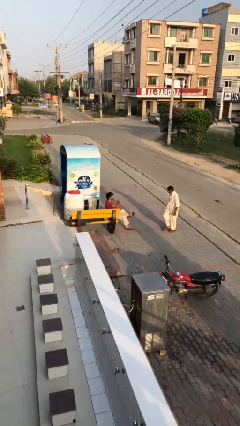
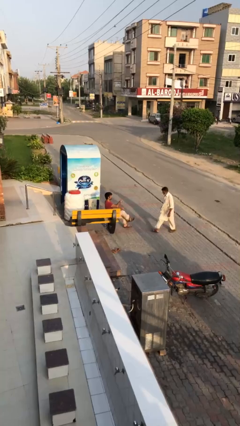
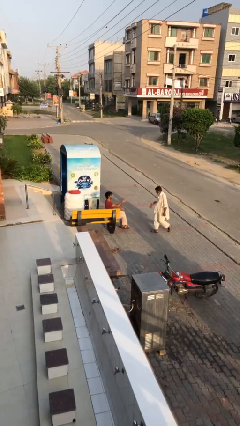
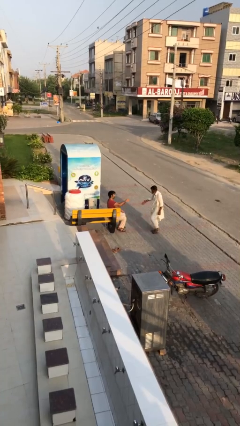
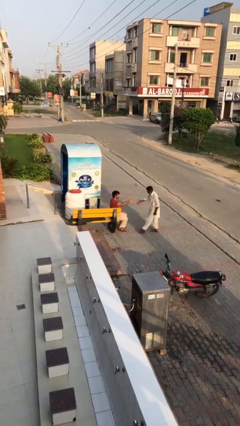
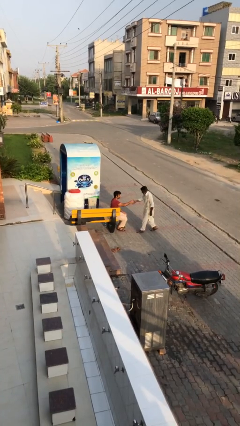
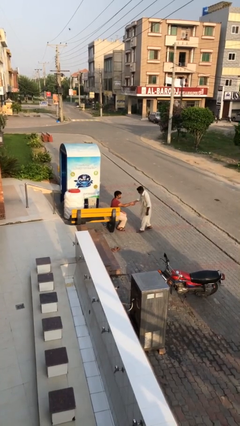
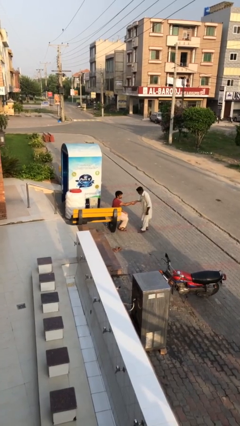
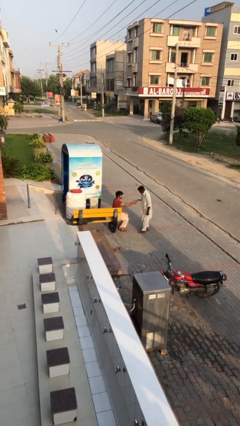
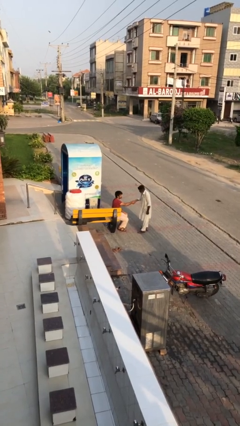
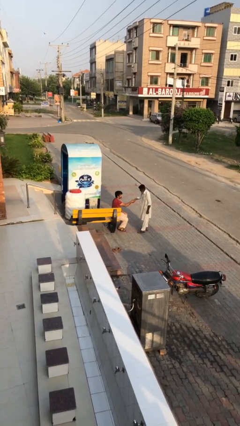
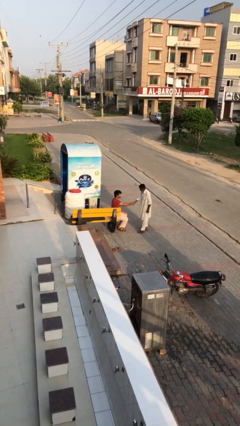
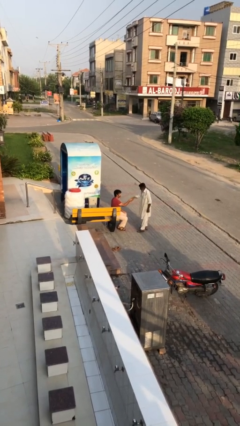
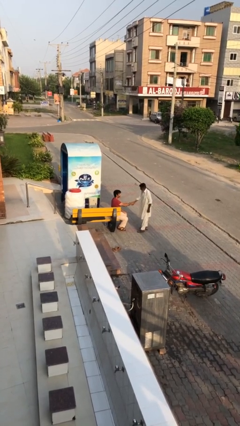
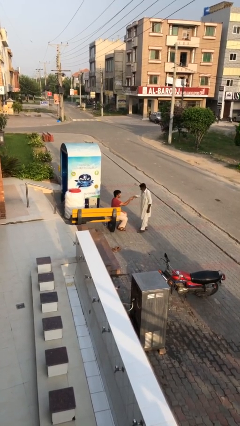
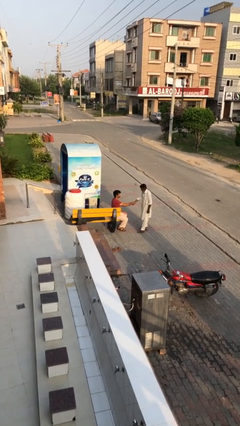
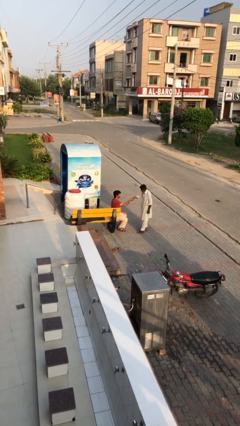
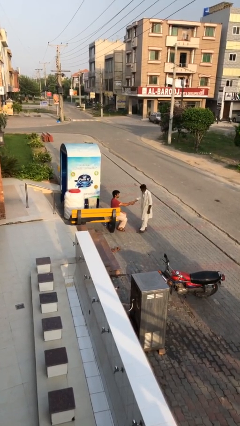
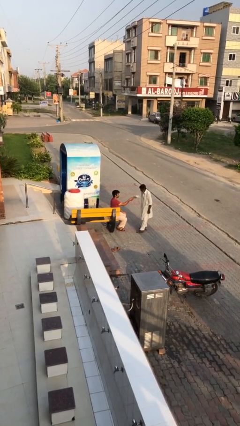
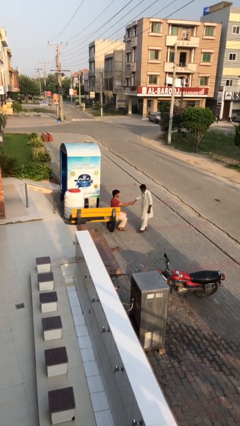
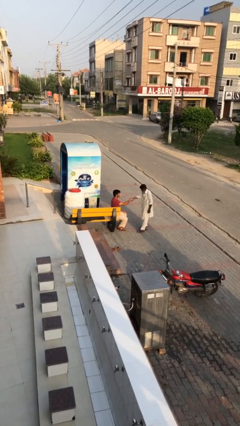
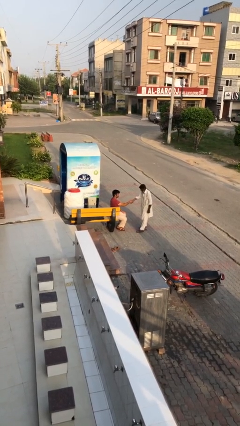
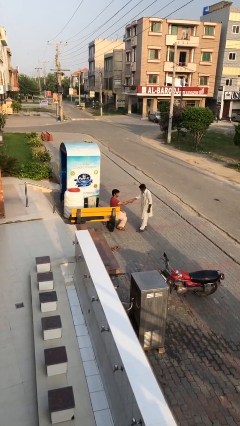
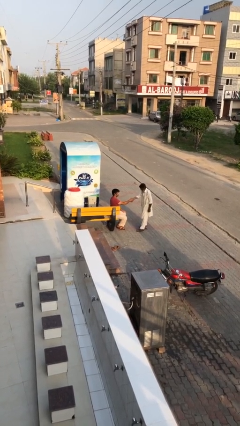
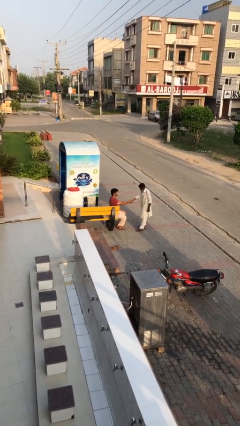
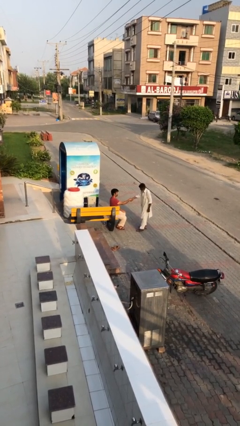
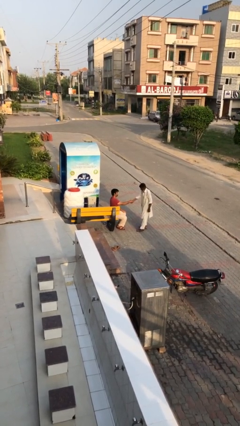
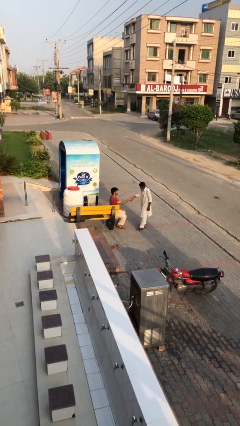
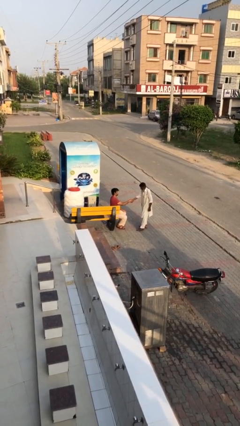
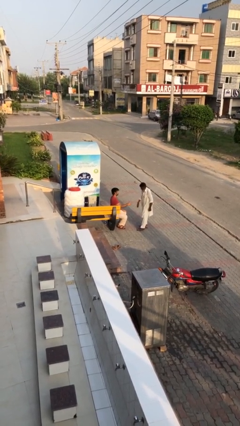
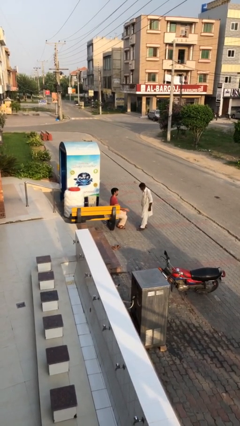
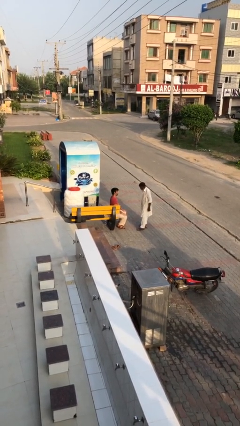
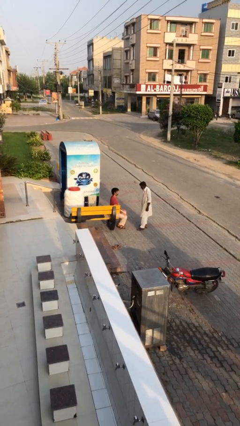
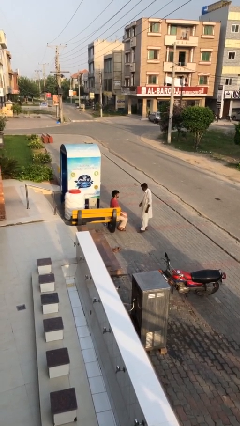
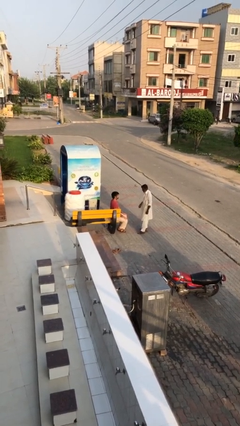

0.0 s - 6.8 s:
person shakes hand

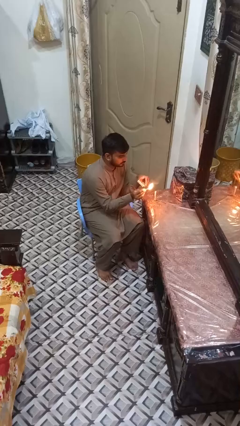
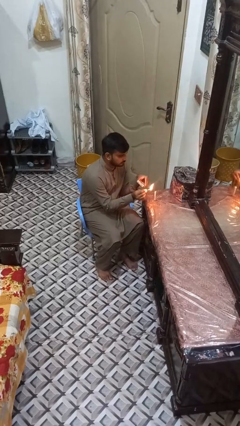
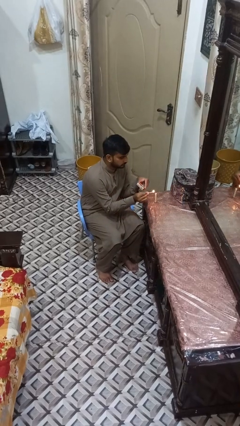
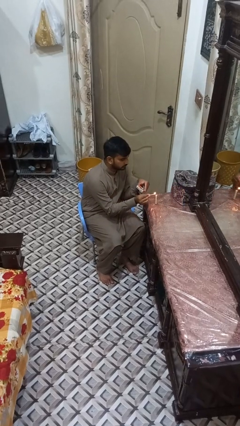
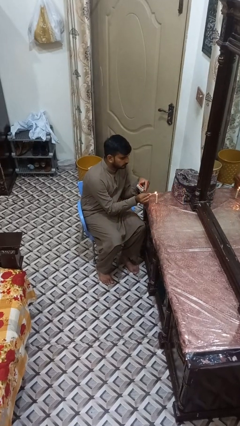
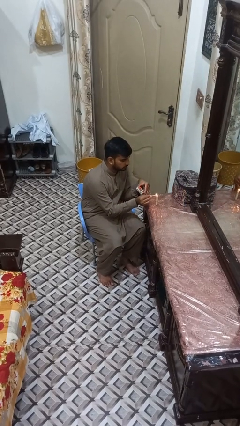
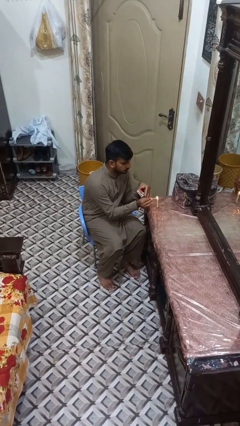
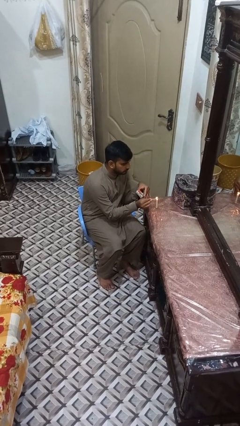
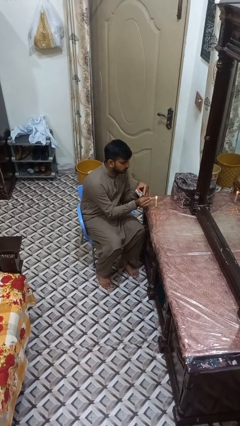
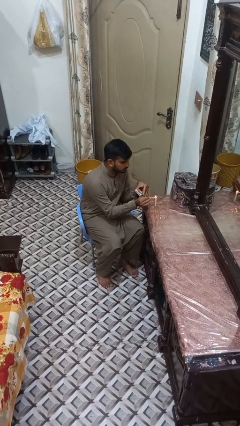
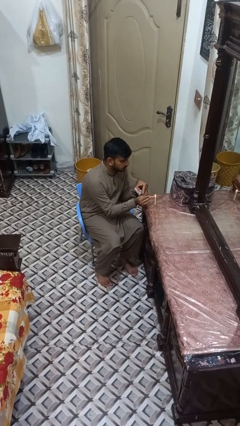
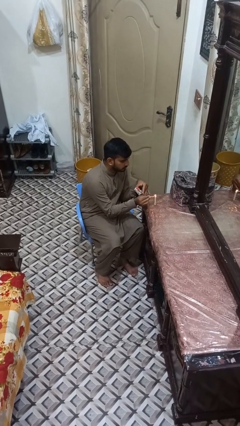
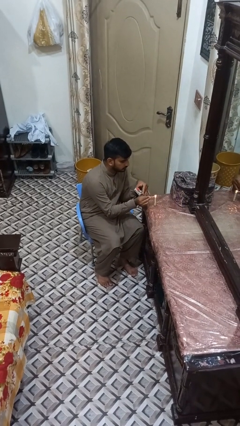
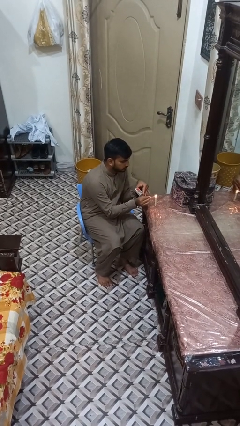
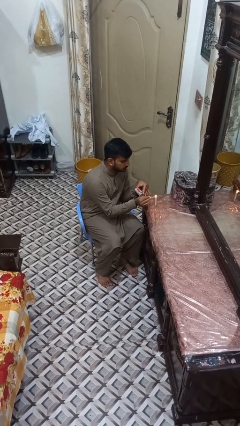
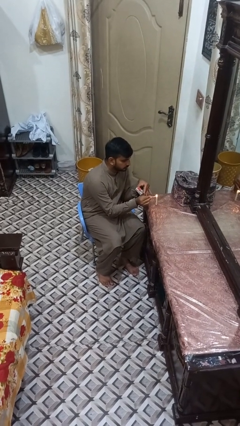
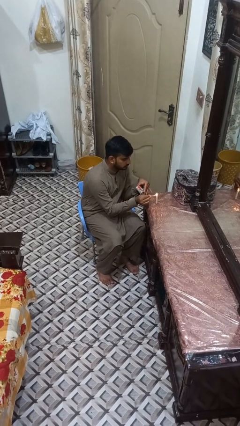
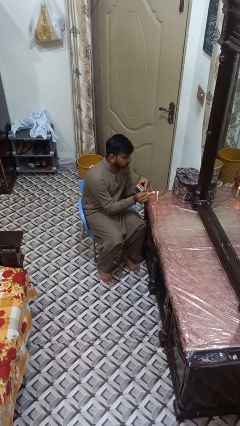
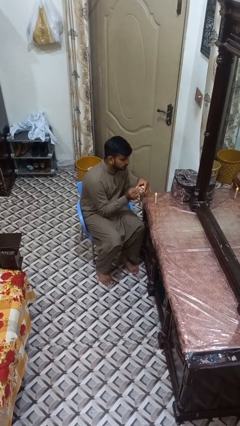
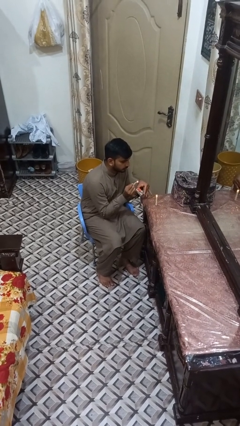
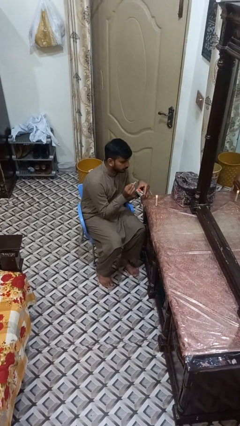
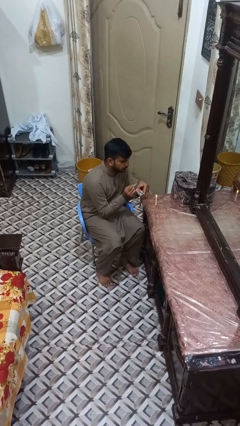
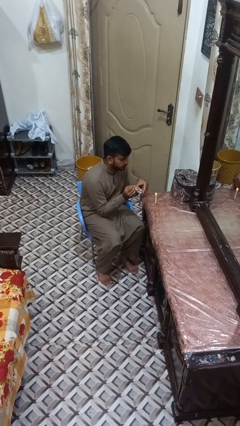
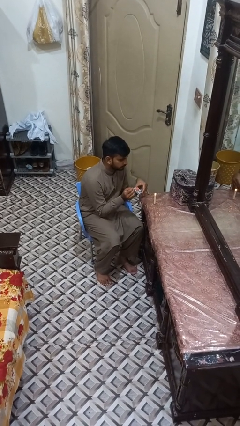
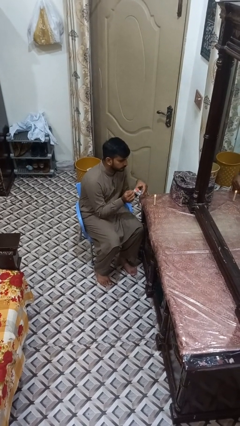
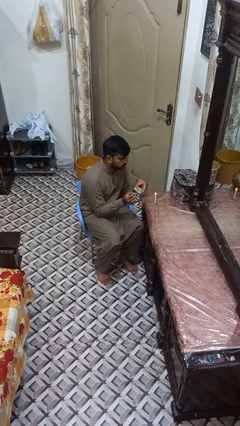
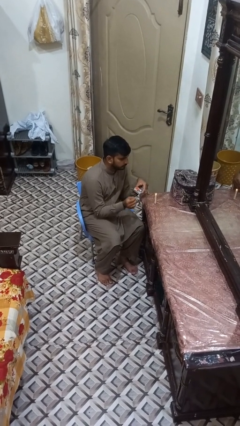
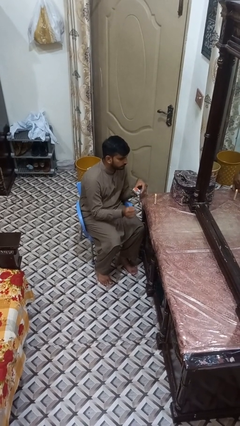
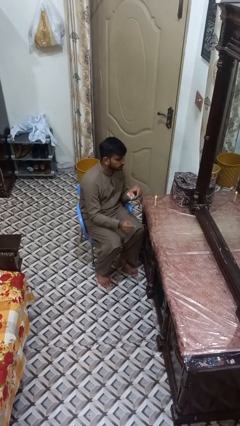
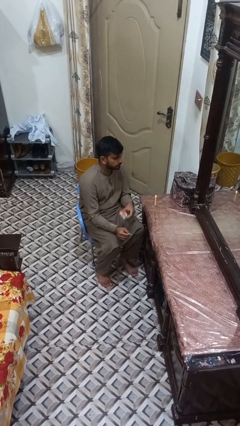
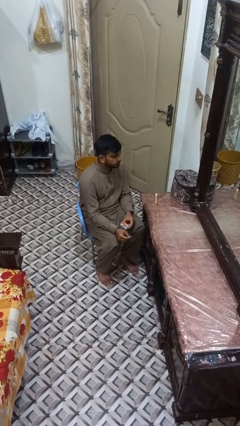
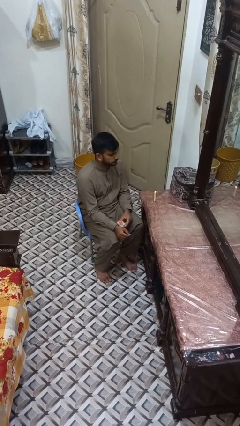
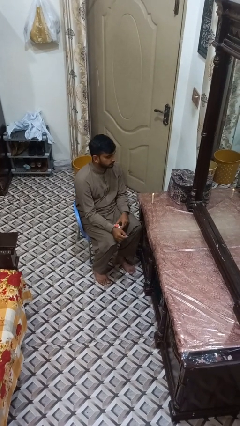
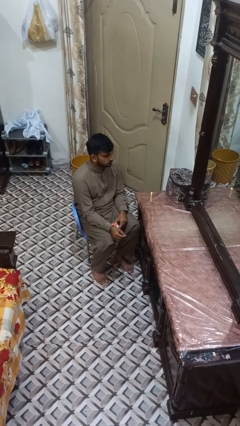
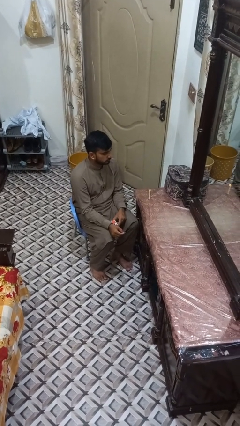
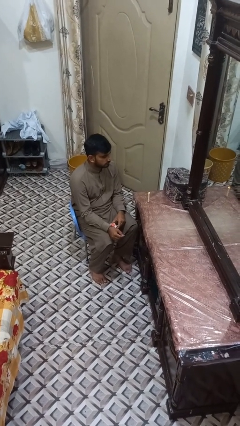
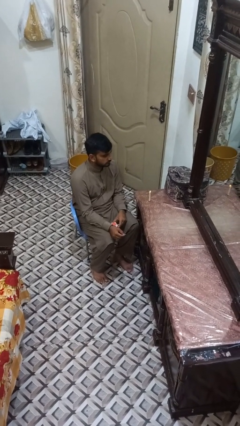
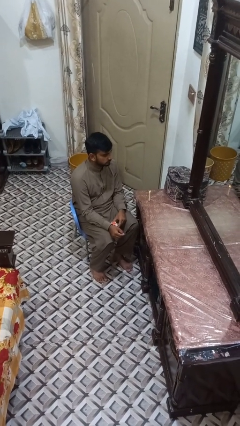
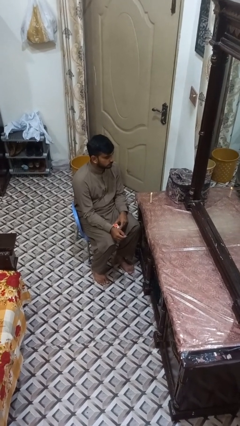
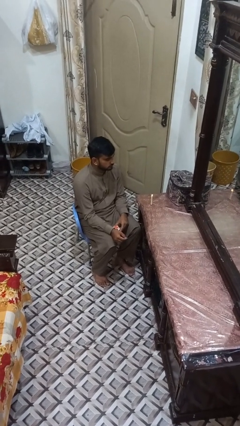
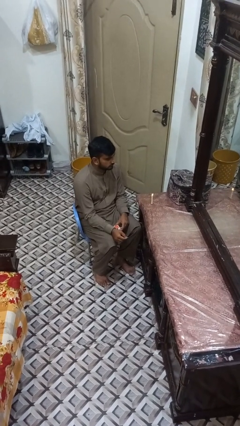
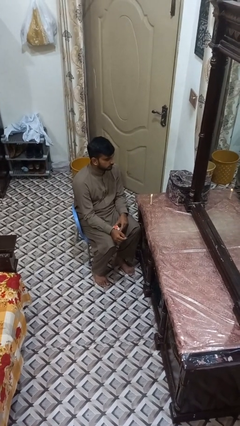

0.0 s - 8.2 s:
person lights candle

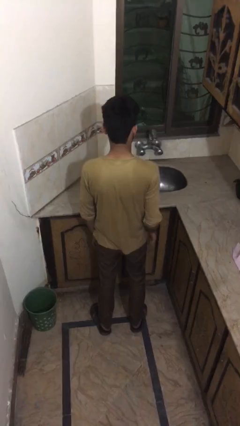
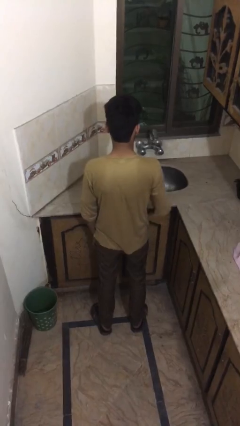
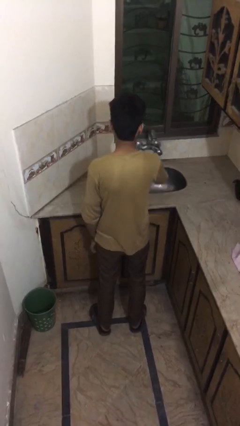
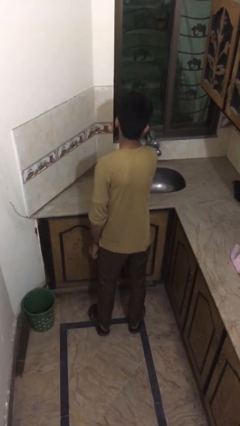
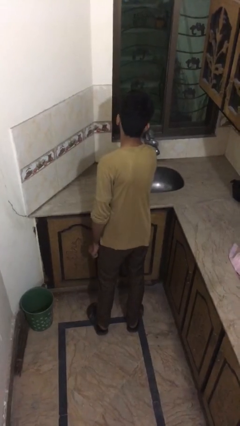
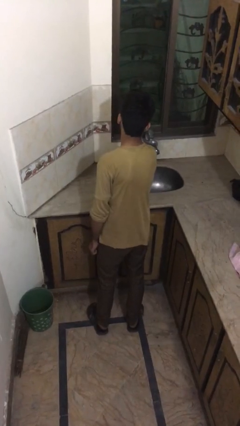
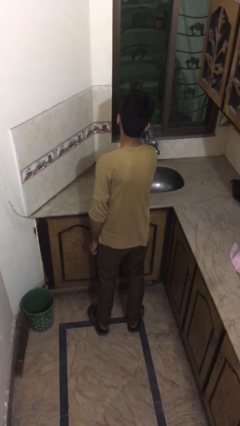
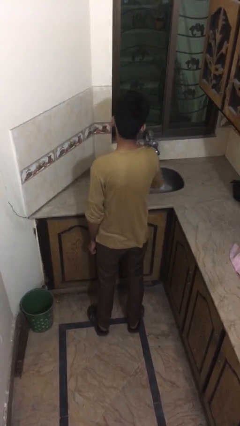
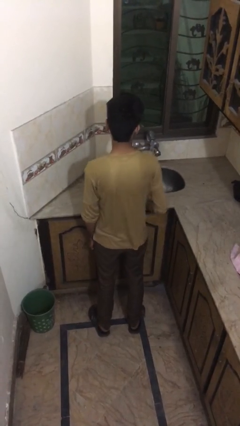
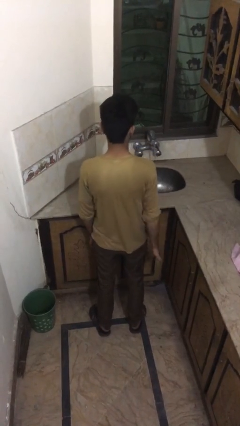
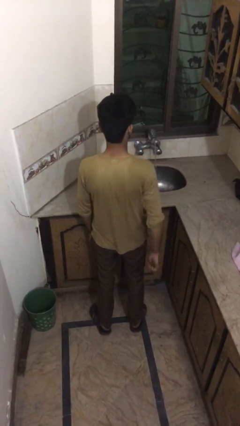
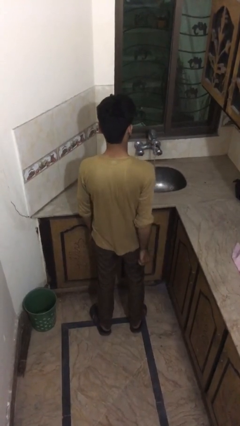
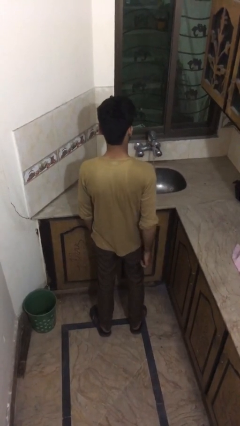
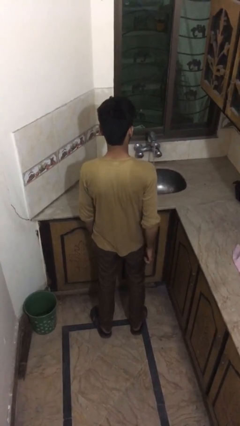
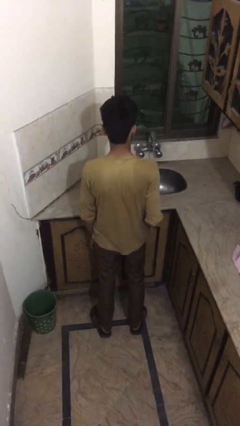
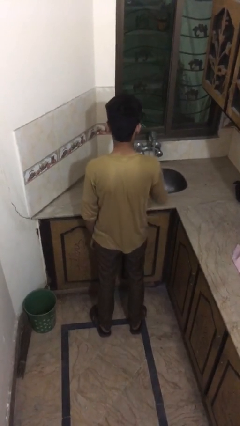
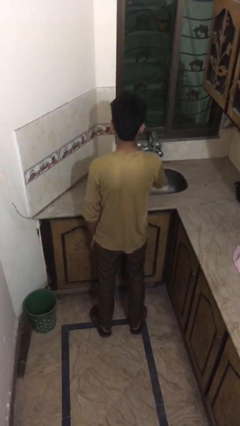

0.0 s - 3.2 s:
person turns on faucet

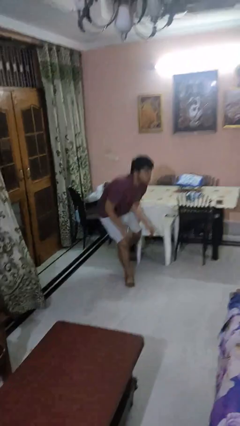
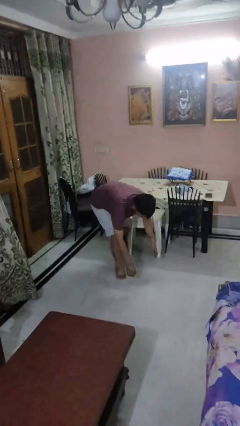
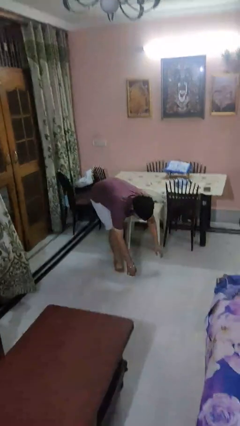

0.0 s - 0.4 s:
person trips on object on floor
